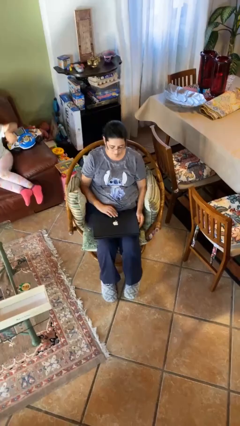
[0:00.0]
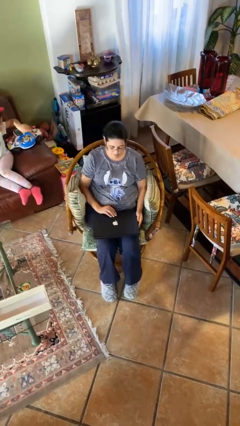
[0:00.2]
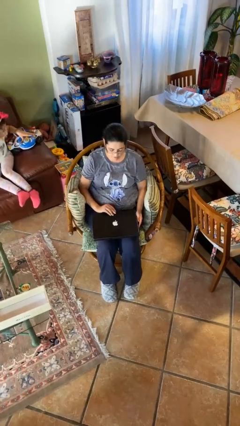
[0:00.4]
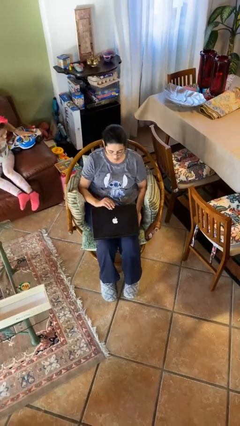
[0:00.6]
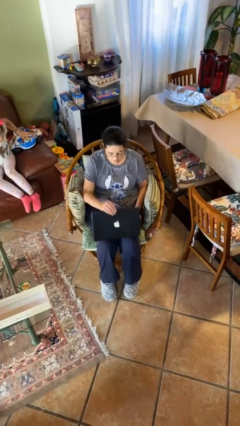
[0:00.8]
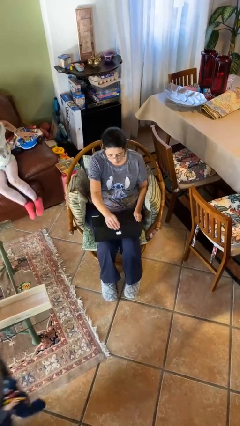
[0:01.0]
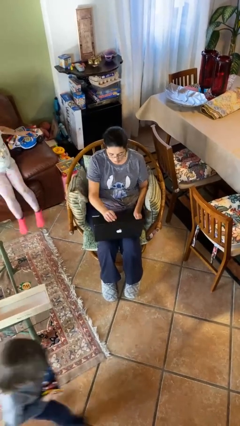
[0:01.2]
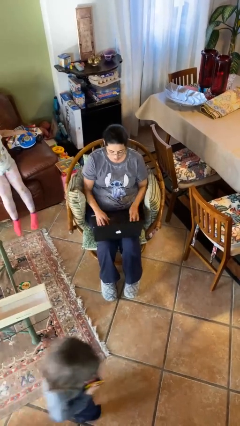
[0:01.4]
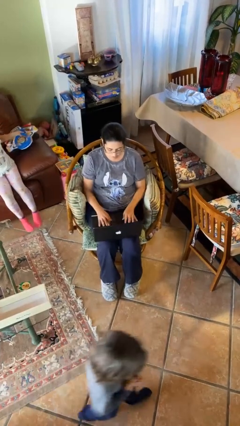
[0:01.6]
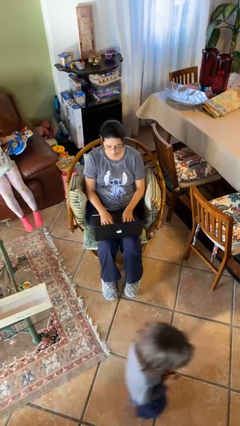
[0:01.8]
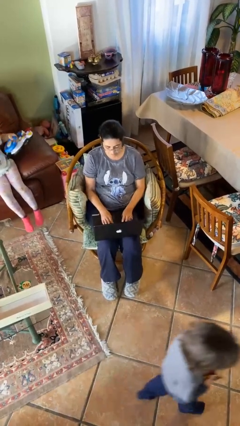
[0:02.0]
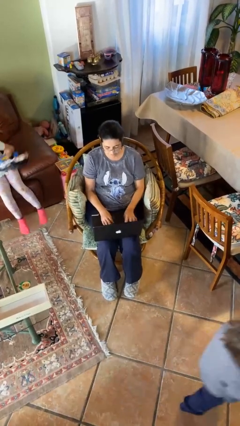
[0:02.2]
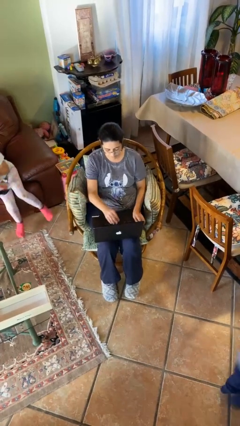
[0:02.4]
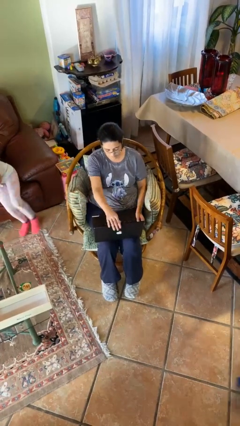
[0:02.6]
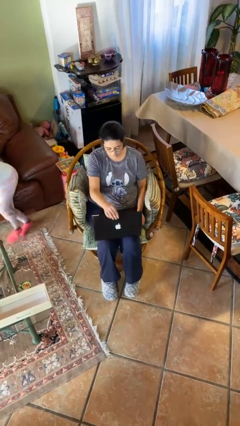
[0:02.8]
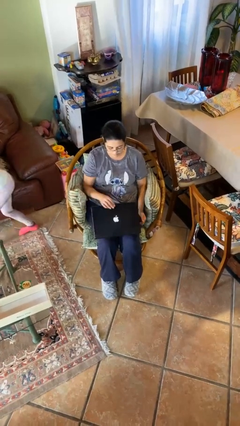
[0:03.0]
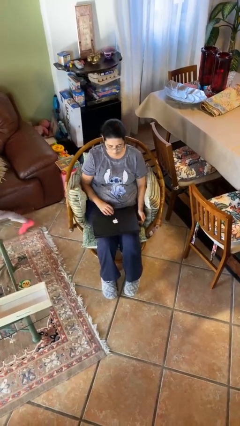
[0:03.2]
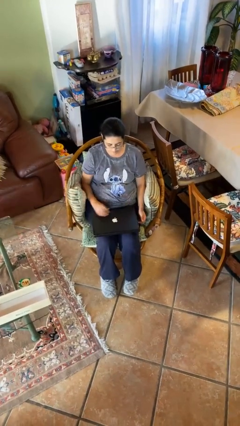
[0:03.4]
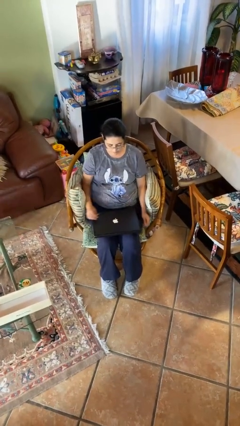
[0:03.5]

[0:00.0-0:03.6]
person interacts with laptop

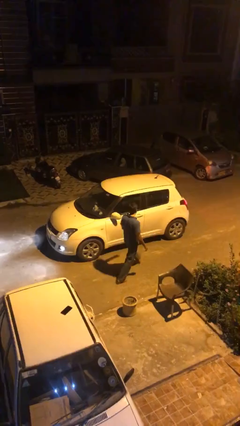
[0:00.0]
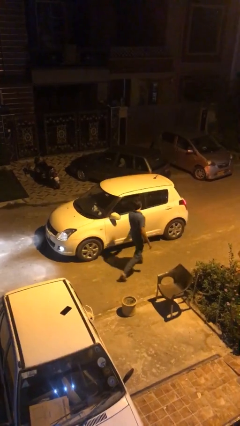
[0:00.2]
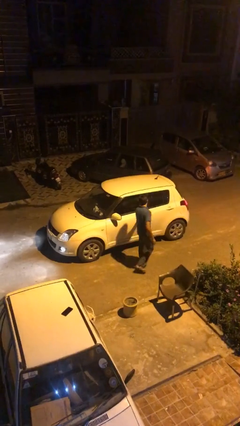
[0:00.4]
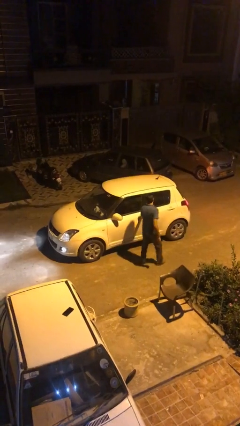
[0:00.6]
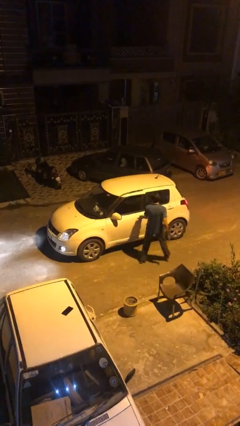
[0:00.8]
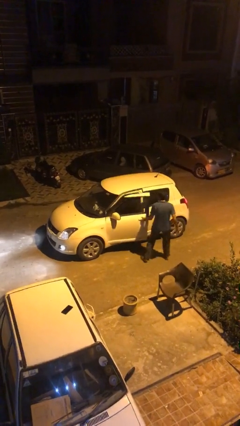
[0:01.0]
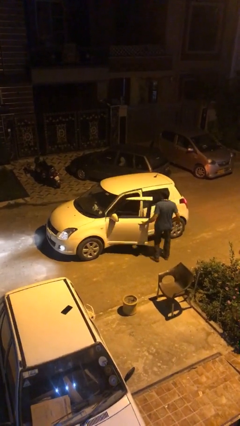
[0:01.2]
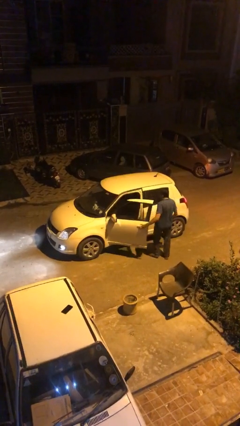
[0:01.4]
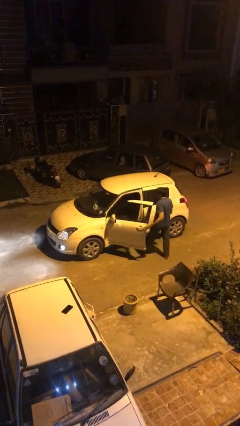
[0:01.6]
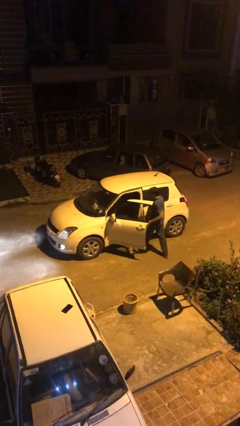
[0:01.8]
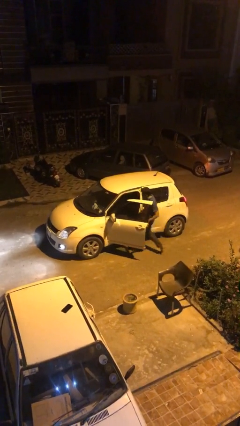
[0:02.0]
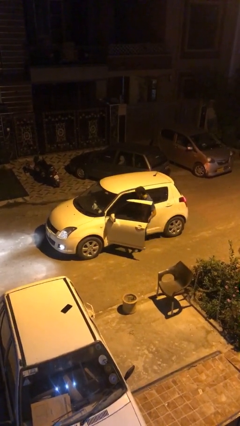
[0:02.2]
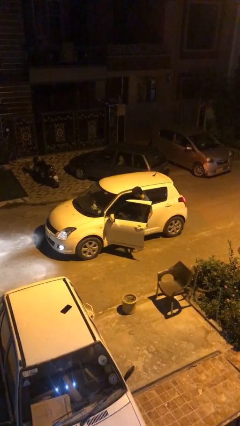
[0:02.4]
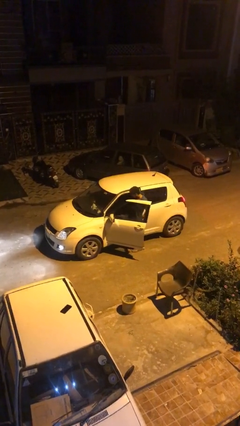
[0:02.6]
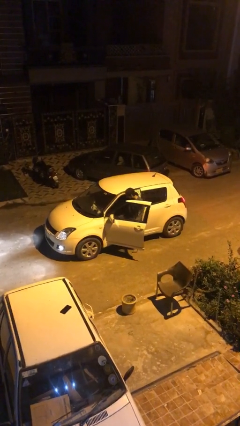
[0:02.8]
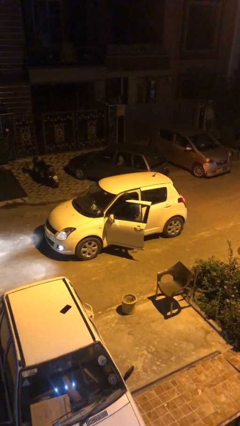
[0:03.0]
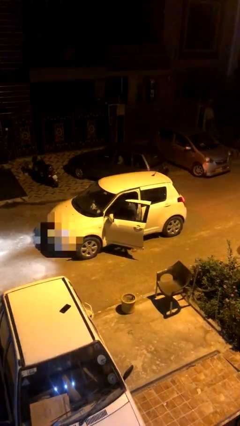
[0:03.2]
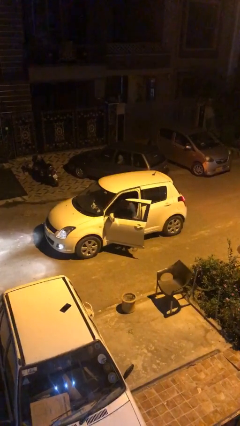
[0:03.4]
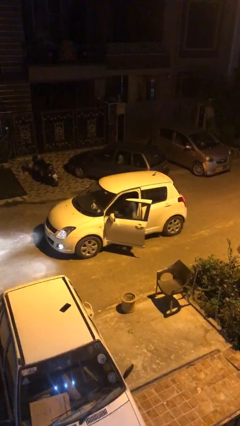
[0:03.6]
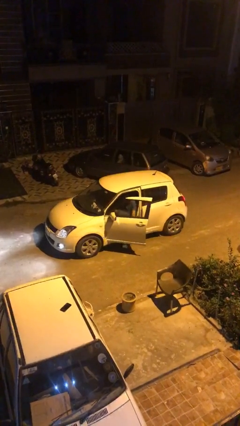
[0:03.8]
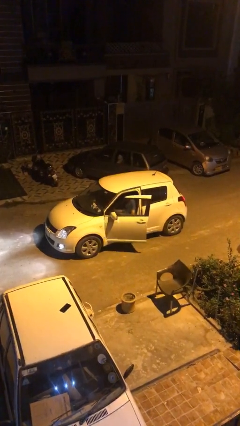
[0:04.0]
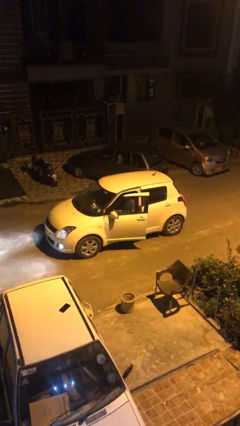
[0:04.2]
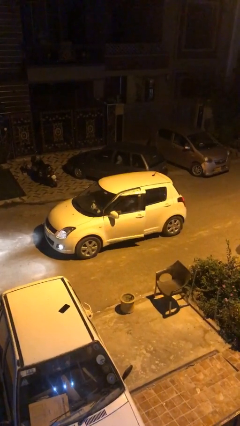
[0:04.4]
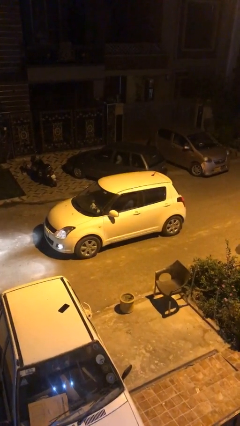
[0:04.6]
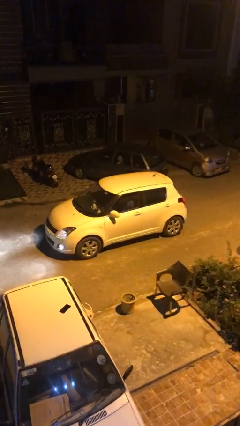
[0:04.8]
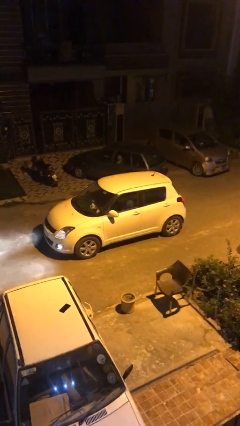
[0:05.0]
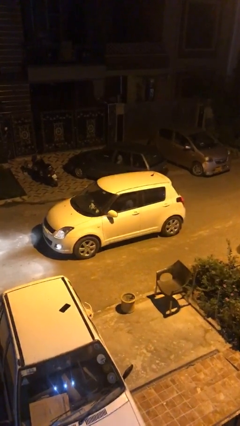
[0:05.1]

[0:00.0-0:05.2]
car picks up person

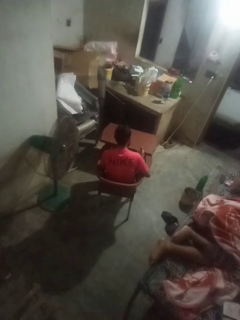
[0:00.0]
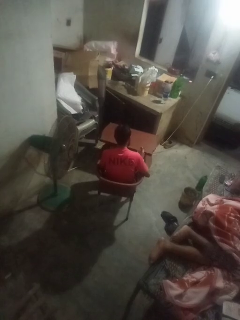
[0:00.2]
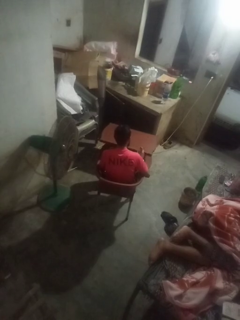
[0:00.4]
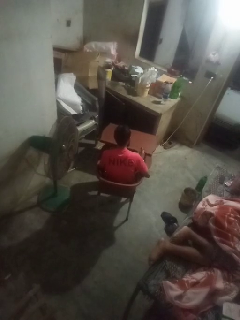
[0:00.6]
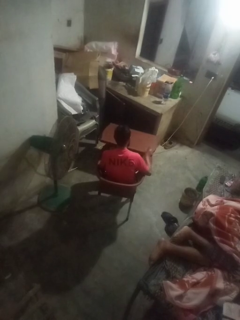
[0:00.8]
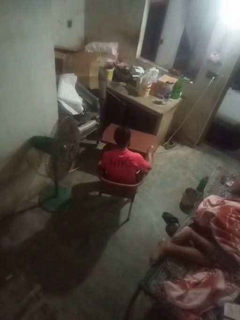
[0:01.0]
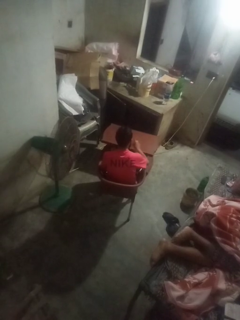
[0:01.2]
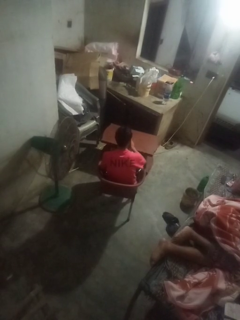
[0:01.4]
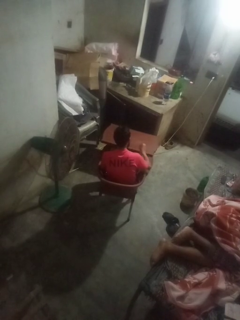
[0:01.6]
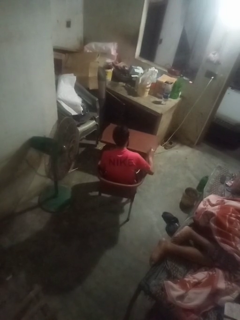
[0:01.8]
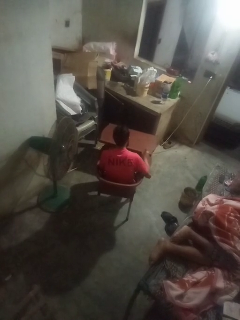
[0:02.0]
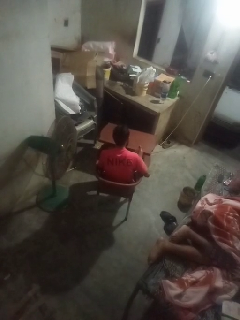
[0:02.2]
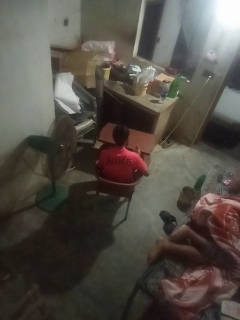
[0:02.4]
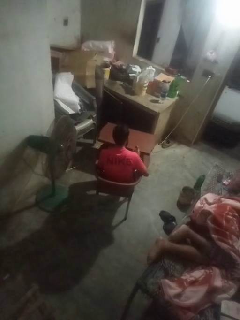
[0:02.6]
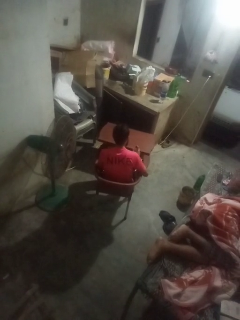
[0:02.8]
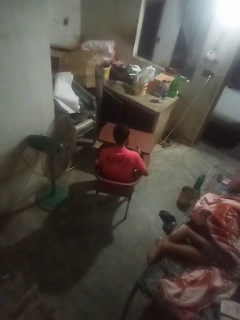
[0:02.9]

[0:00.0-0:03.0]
person sprays from bottle

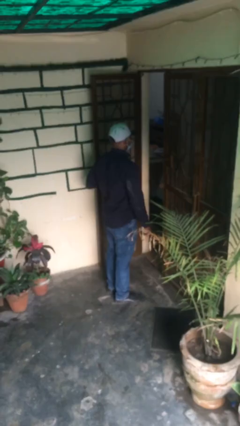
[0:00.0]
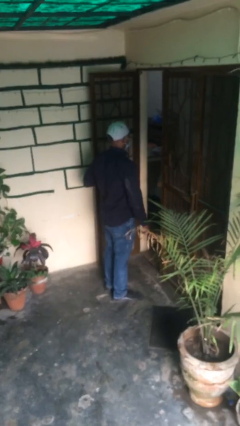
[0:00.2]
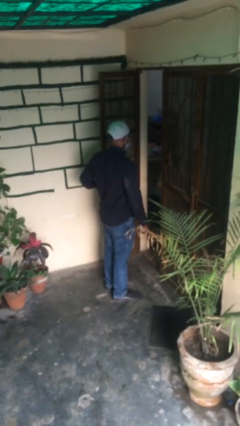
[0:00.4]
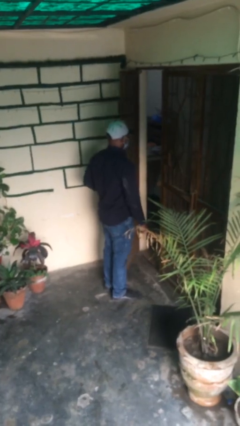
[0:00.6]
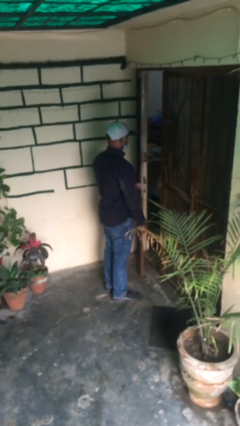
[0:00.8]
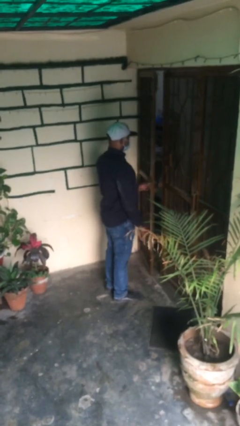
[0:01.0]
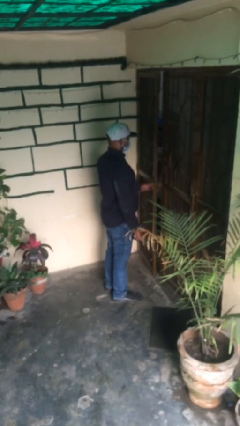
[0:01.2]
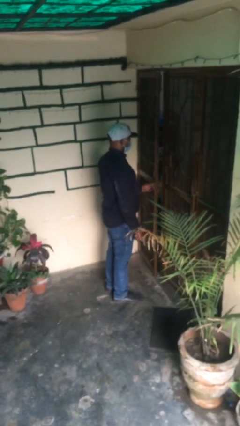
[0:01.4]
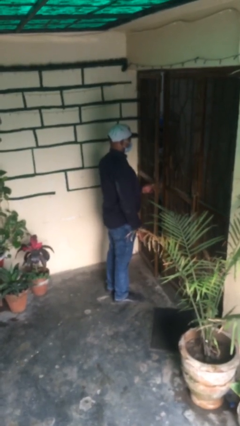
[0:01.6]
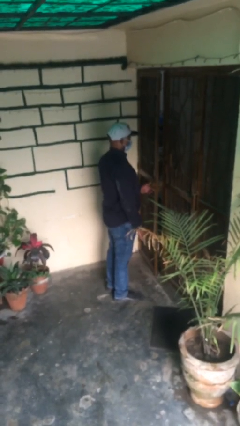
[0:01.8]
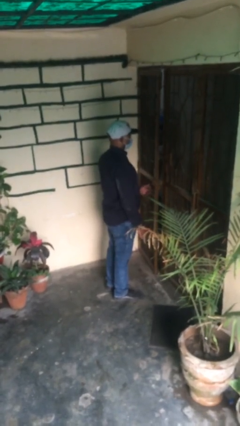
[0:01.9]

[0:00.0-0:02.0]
person closes facility door

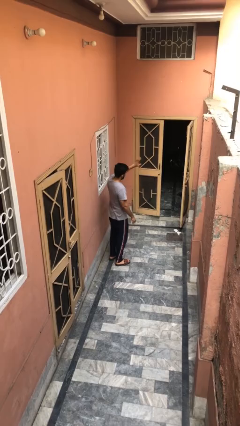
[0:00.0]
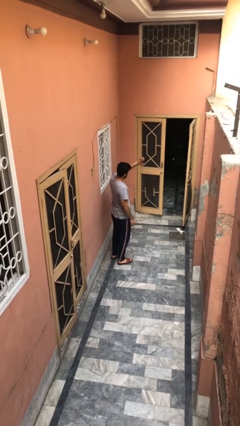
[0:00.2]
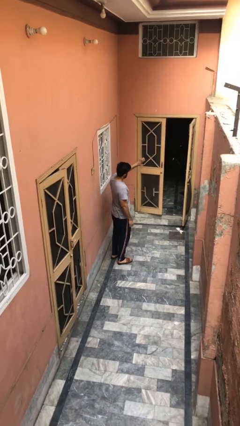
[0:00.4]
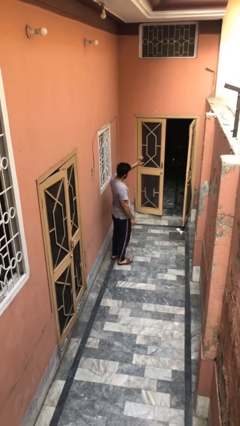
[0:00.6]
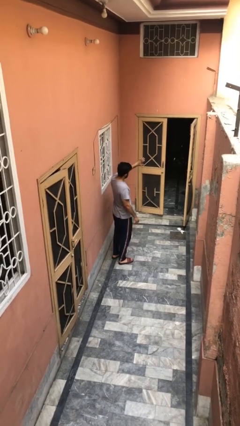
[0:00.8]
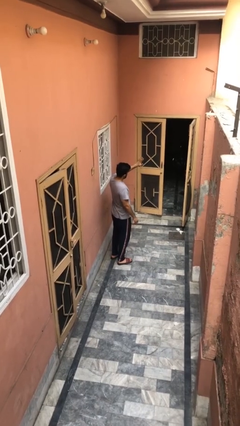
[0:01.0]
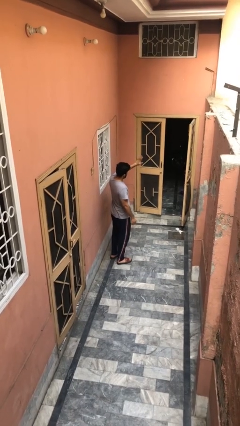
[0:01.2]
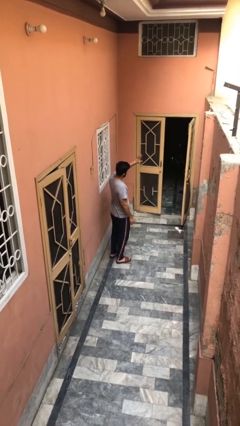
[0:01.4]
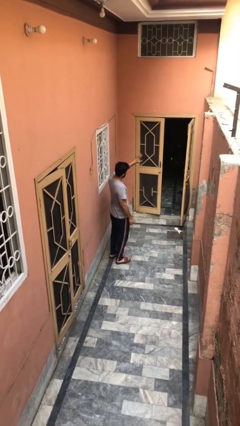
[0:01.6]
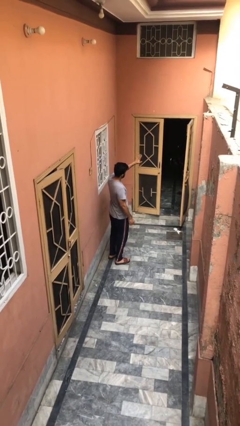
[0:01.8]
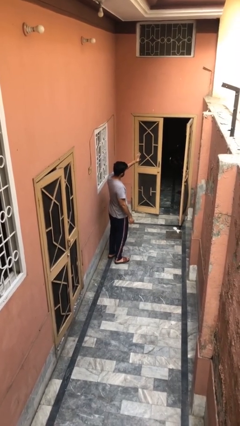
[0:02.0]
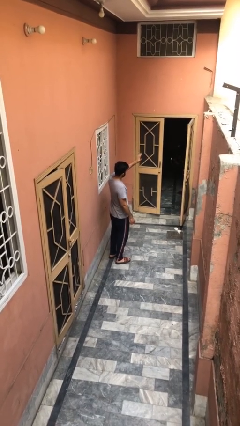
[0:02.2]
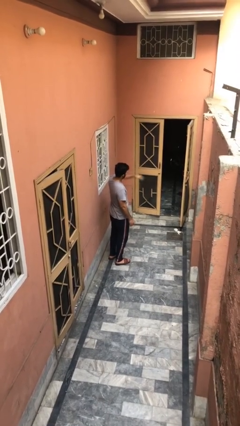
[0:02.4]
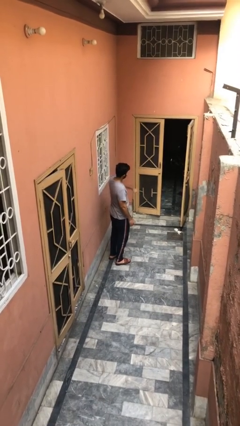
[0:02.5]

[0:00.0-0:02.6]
person waves at person

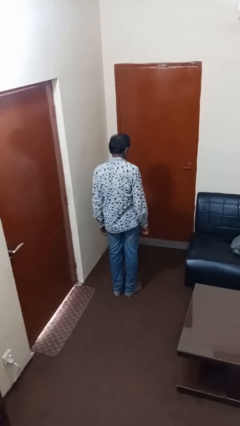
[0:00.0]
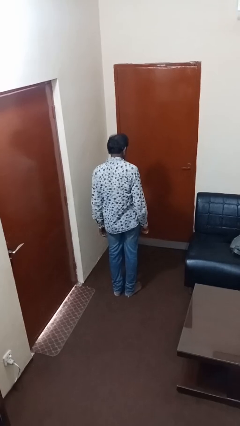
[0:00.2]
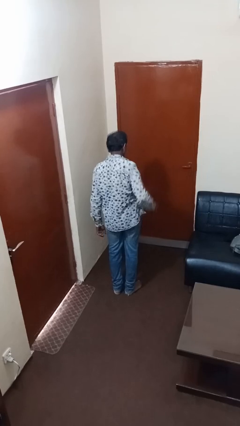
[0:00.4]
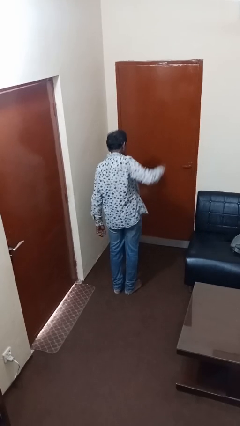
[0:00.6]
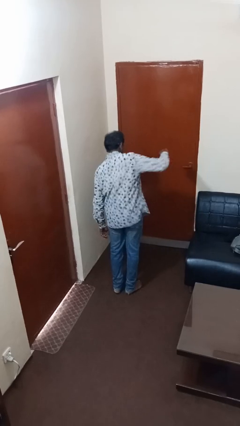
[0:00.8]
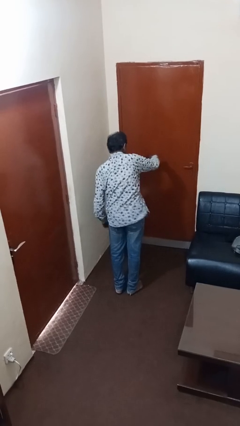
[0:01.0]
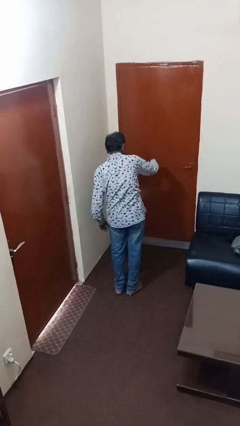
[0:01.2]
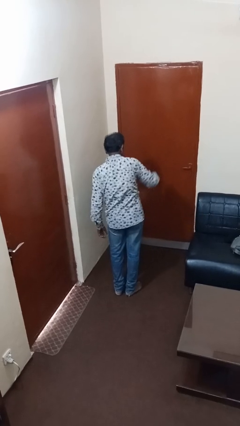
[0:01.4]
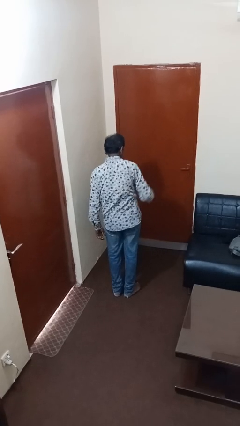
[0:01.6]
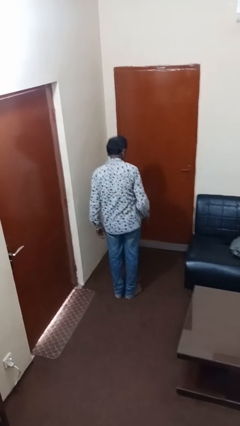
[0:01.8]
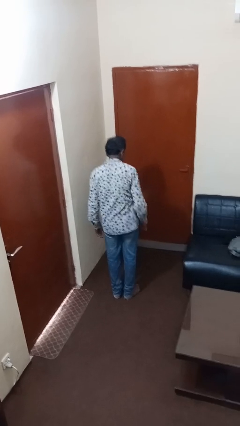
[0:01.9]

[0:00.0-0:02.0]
person karate chop
